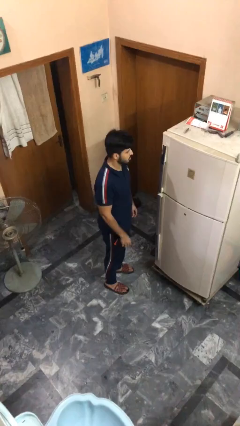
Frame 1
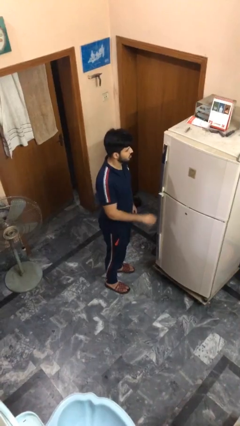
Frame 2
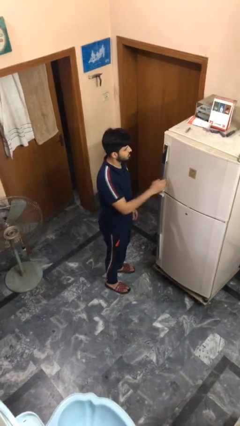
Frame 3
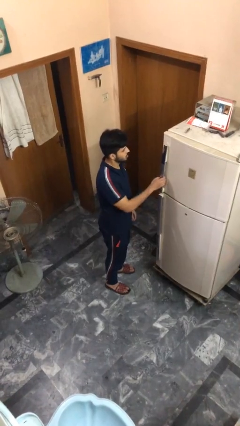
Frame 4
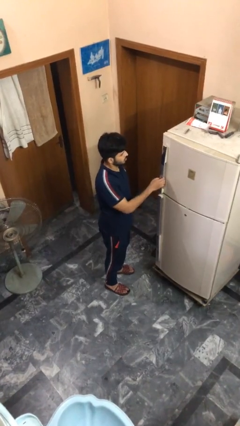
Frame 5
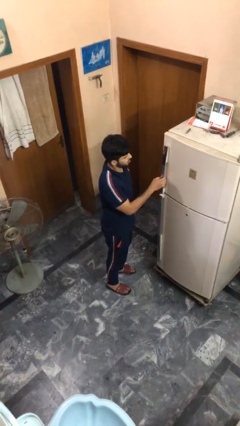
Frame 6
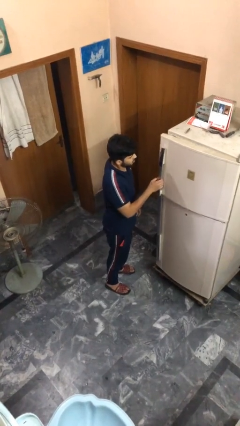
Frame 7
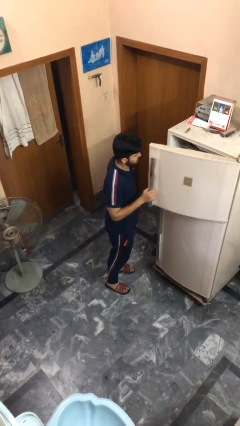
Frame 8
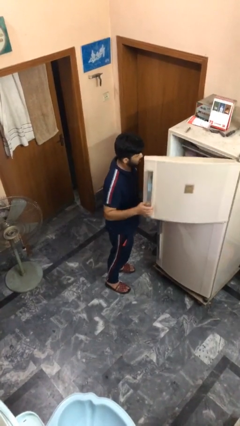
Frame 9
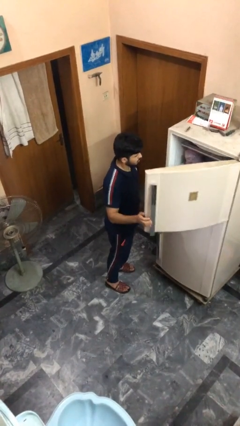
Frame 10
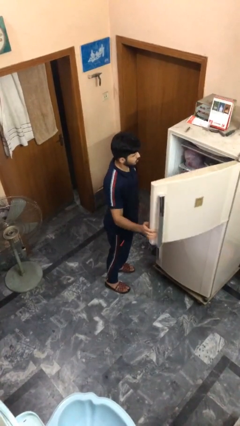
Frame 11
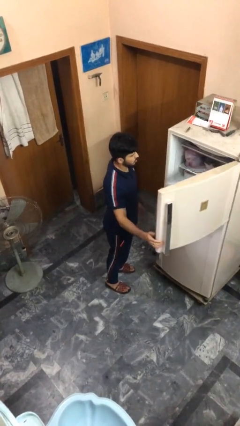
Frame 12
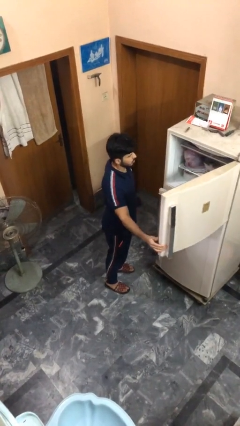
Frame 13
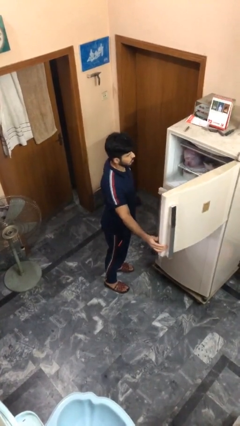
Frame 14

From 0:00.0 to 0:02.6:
person opens refrigerator

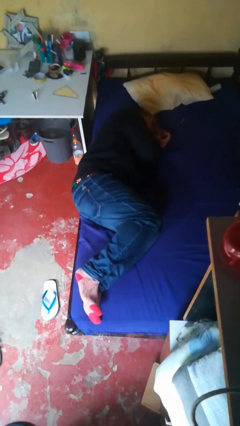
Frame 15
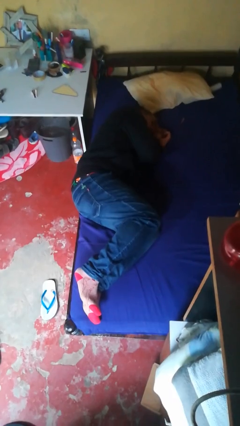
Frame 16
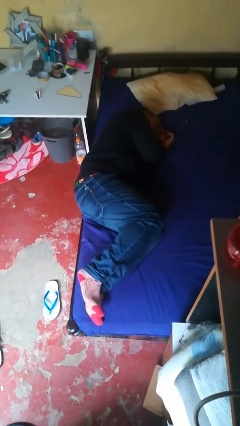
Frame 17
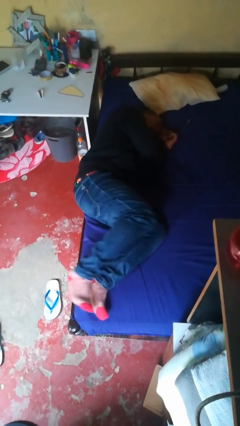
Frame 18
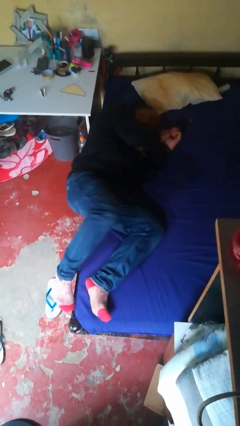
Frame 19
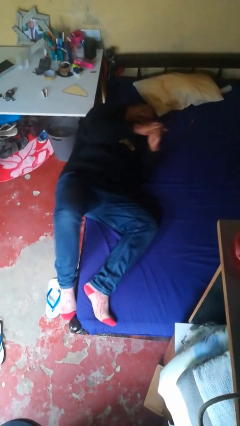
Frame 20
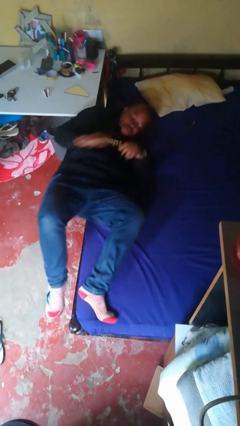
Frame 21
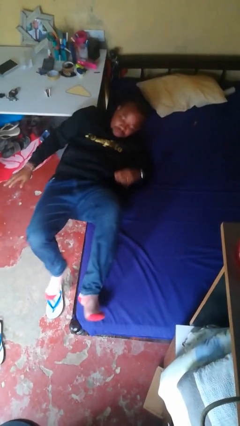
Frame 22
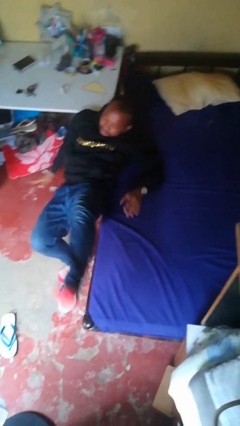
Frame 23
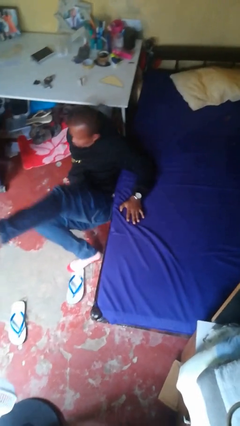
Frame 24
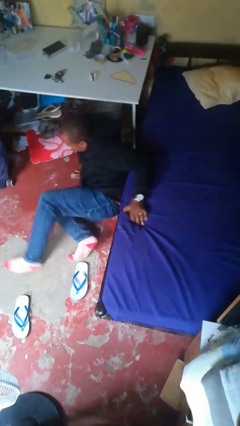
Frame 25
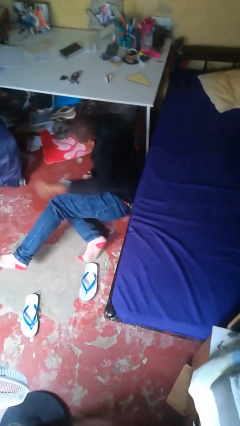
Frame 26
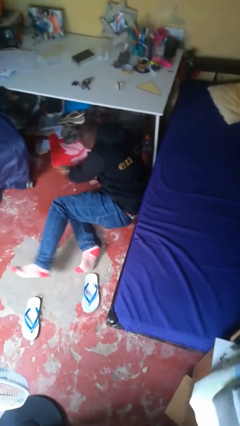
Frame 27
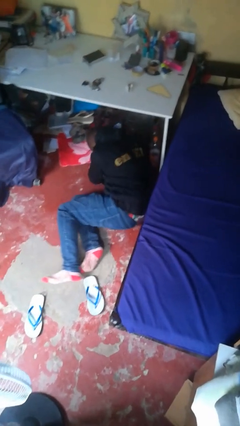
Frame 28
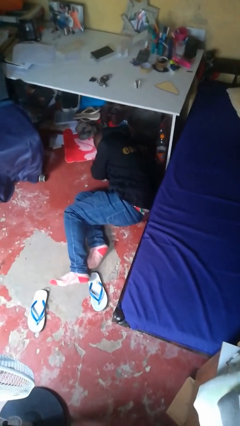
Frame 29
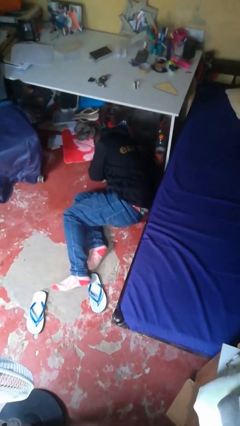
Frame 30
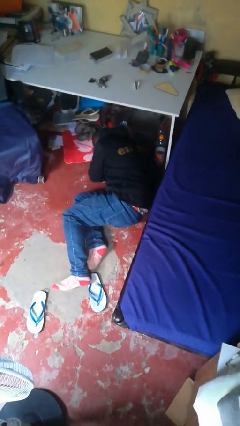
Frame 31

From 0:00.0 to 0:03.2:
person falls from bed

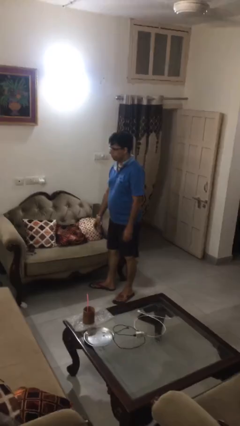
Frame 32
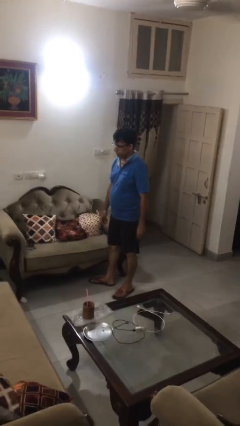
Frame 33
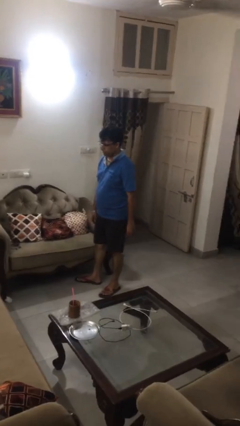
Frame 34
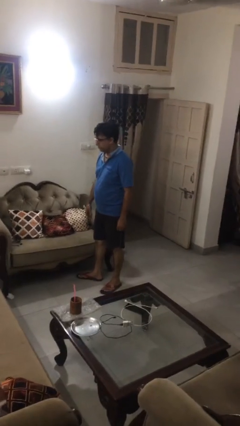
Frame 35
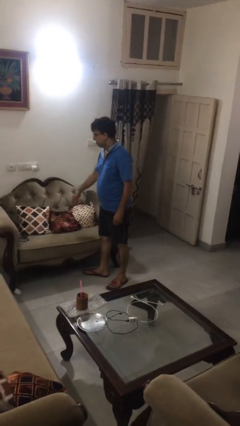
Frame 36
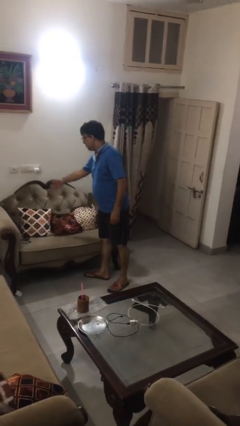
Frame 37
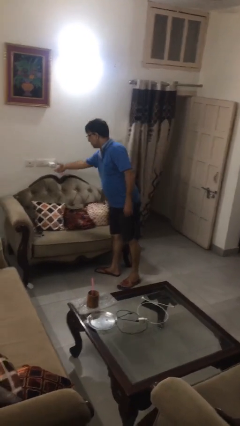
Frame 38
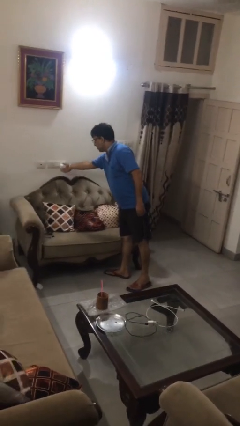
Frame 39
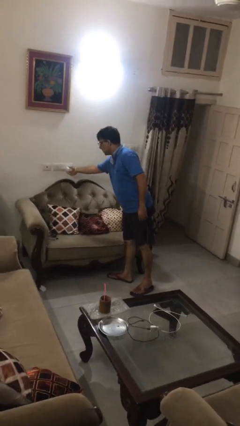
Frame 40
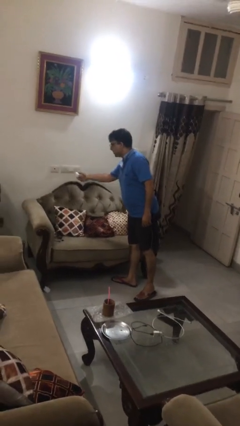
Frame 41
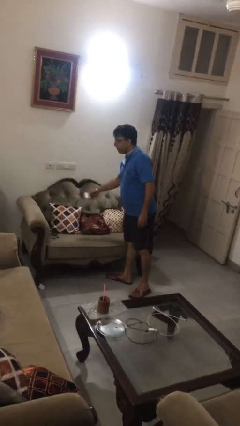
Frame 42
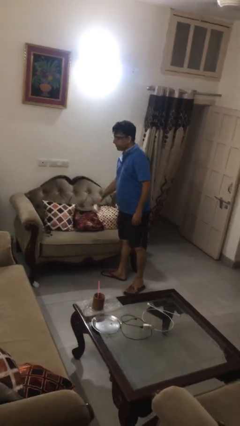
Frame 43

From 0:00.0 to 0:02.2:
person unplugs from electrical socket

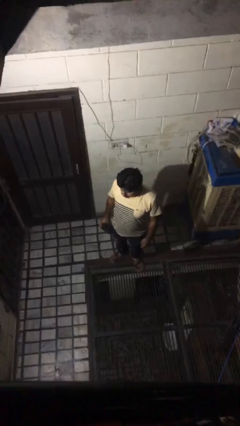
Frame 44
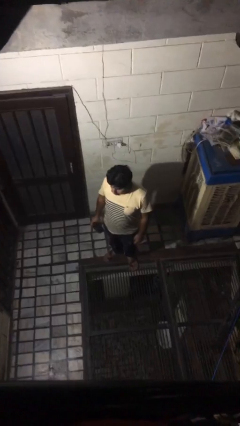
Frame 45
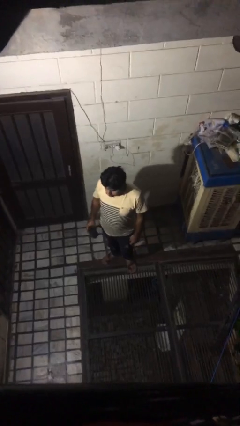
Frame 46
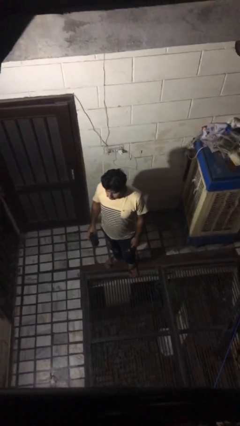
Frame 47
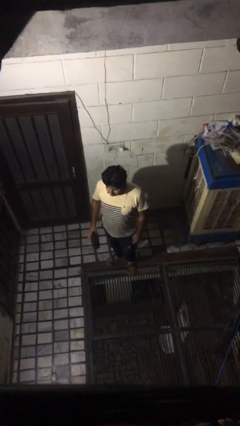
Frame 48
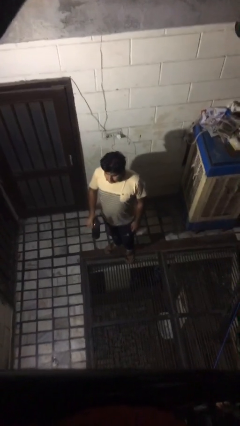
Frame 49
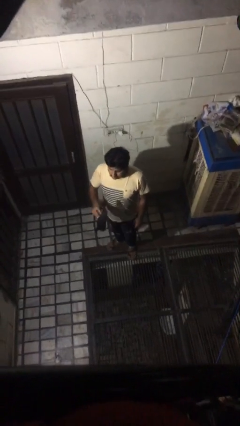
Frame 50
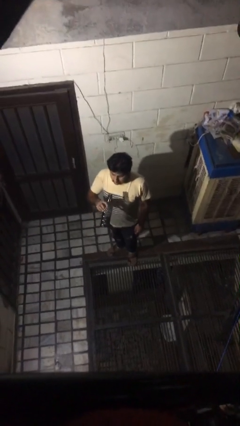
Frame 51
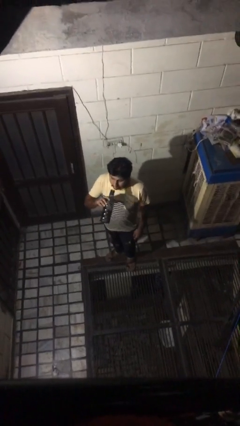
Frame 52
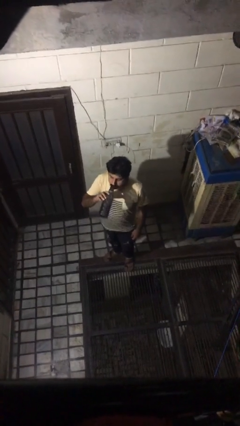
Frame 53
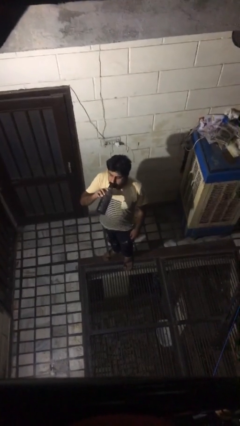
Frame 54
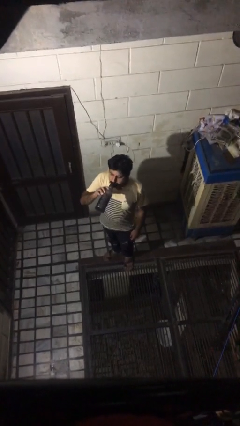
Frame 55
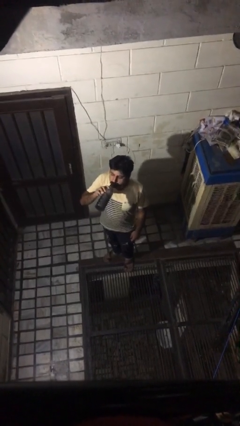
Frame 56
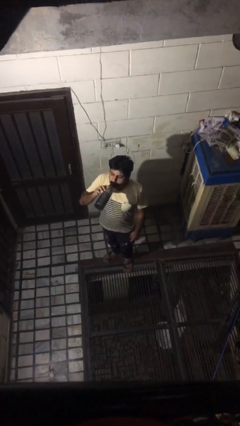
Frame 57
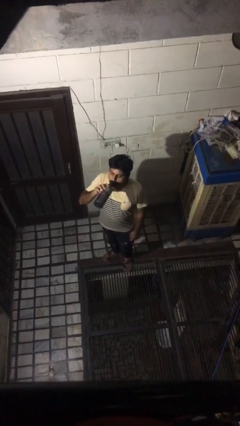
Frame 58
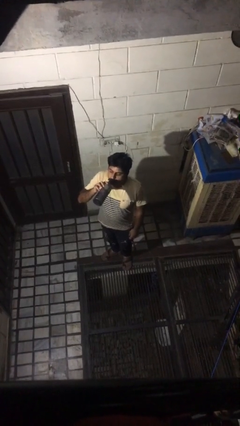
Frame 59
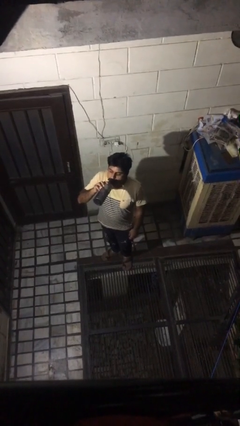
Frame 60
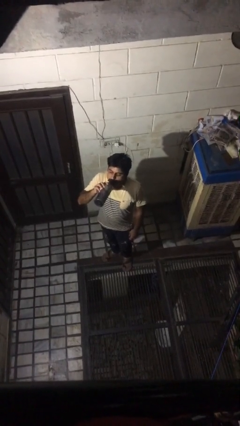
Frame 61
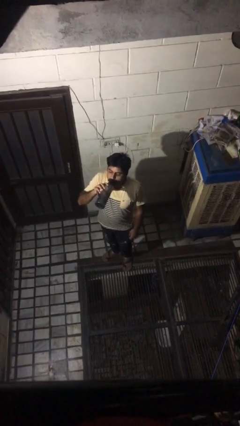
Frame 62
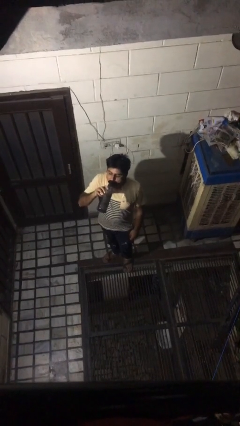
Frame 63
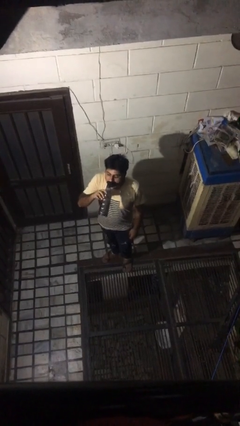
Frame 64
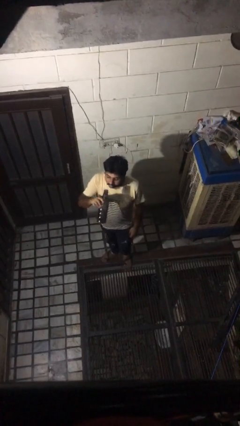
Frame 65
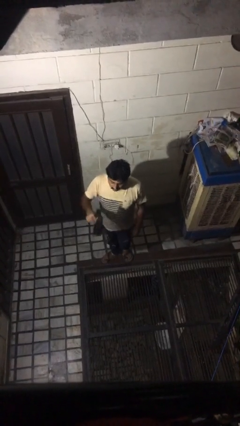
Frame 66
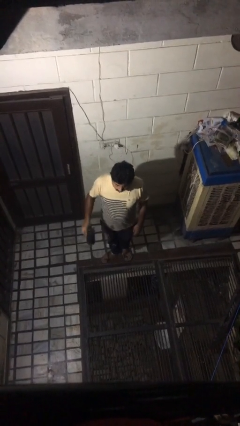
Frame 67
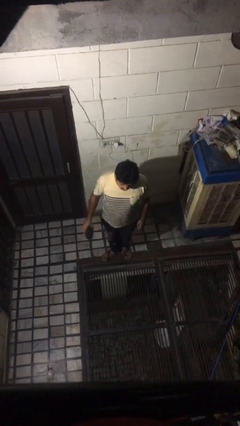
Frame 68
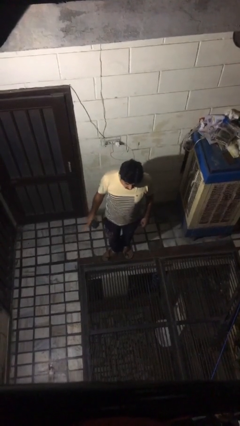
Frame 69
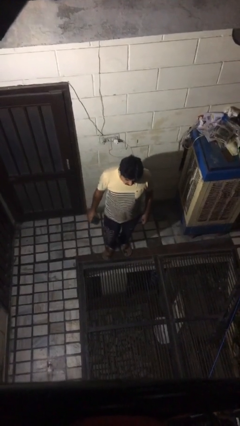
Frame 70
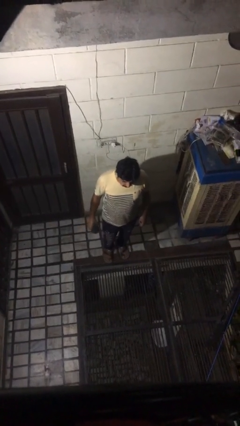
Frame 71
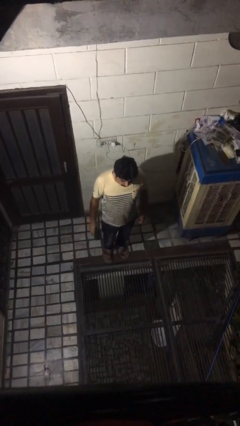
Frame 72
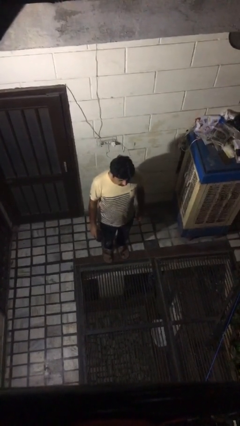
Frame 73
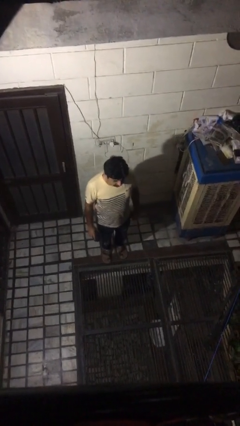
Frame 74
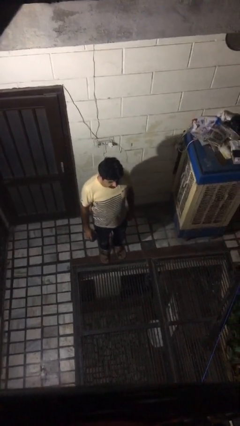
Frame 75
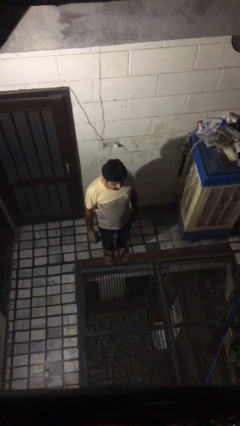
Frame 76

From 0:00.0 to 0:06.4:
person drinks from bottle

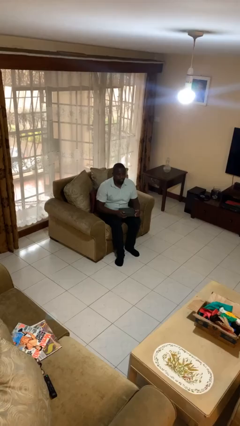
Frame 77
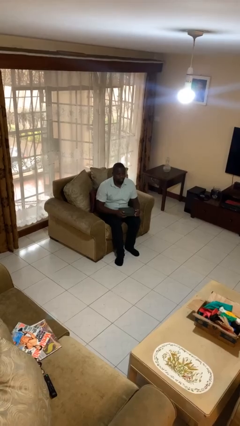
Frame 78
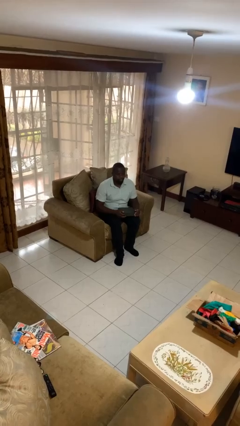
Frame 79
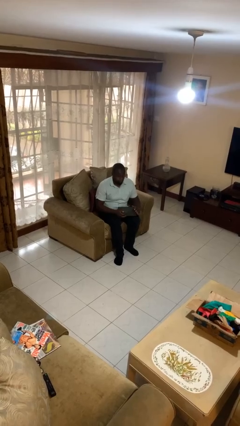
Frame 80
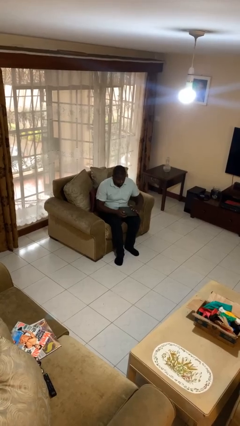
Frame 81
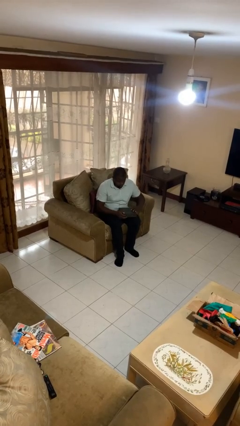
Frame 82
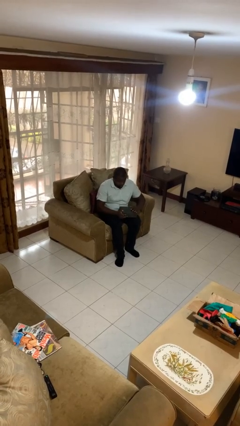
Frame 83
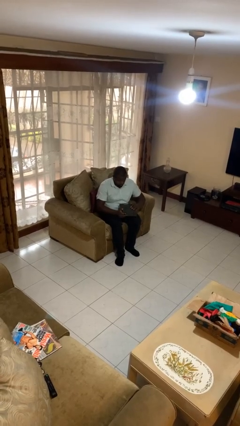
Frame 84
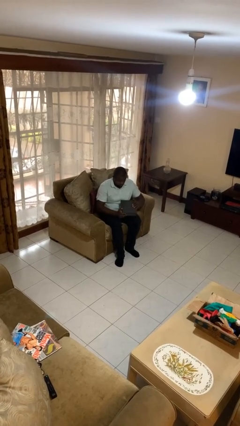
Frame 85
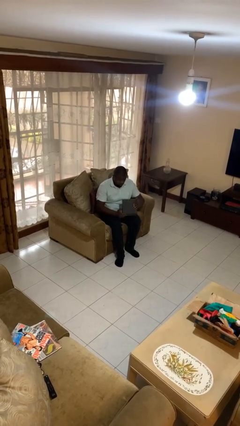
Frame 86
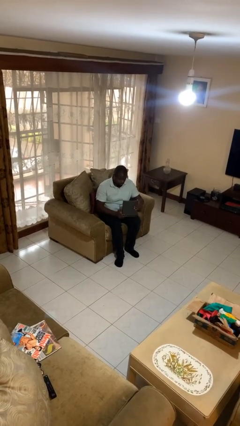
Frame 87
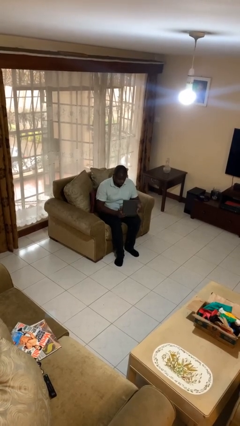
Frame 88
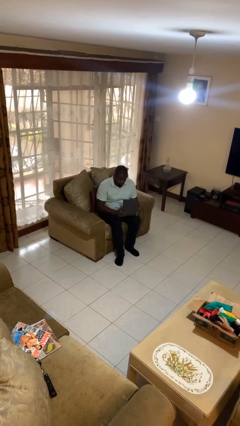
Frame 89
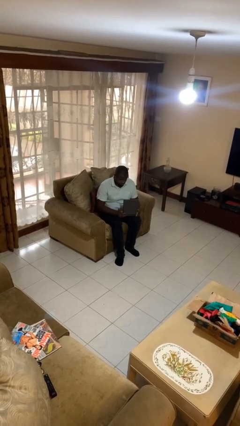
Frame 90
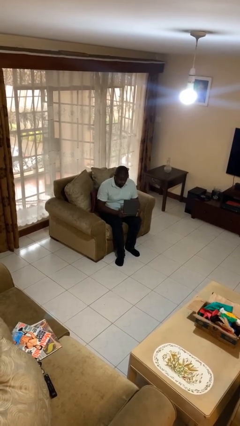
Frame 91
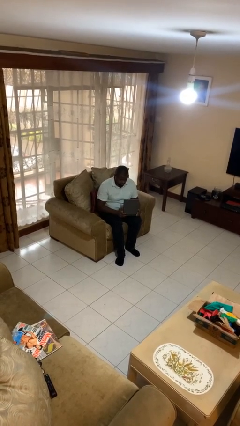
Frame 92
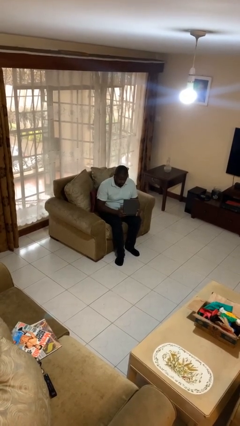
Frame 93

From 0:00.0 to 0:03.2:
person opens jewelry box
